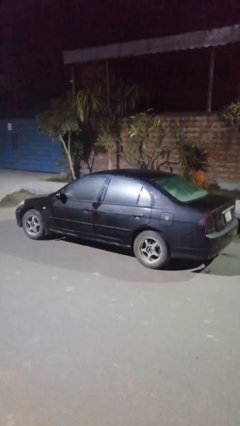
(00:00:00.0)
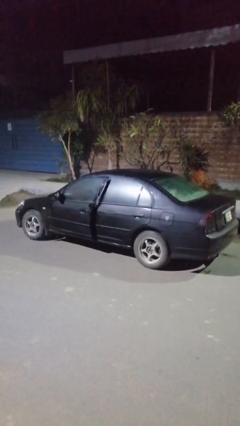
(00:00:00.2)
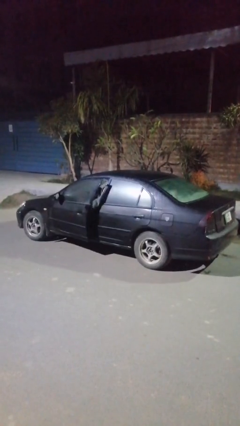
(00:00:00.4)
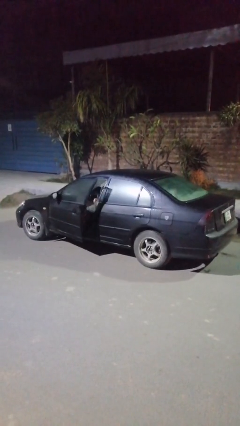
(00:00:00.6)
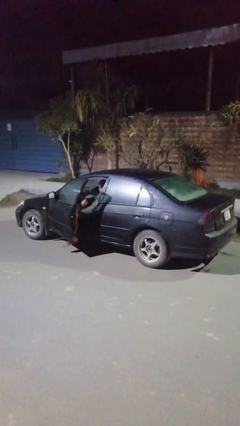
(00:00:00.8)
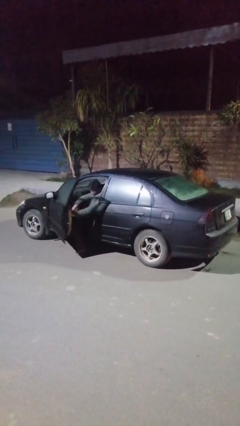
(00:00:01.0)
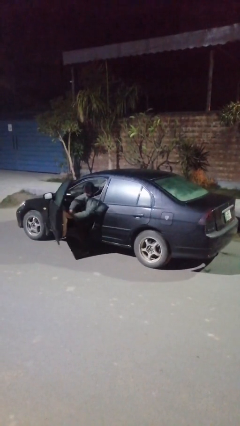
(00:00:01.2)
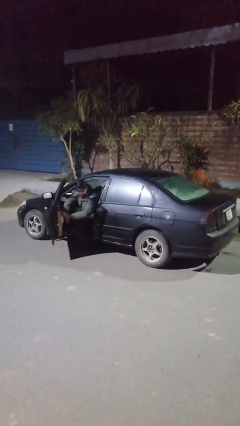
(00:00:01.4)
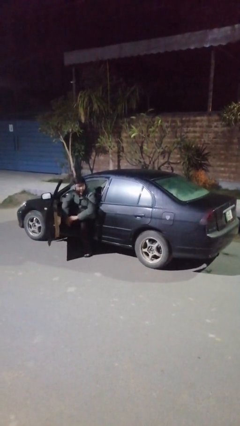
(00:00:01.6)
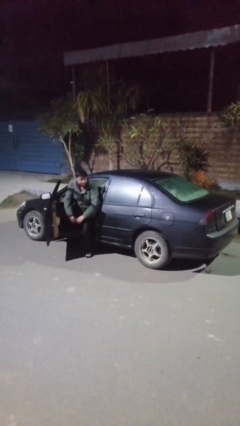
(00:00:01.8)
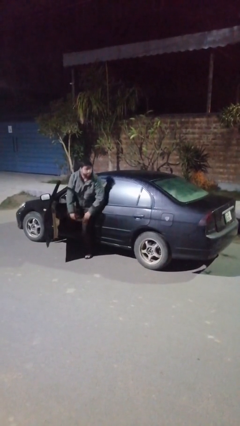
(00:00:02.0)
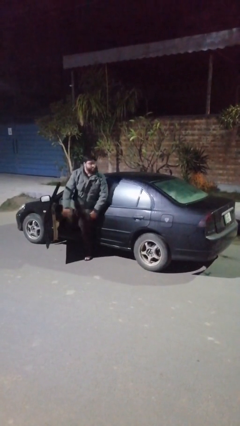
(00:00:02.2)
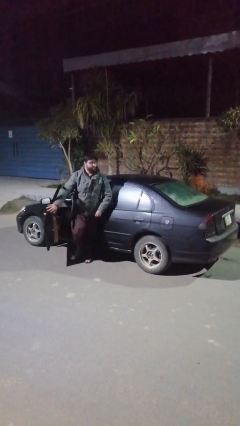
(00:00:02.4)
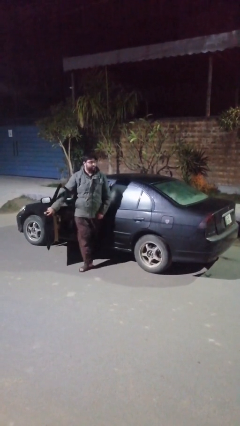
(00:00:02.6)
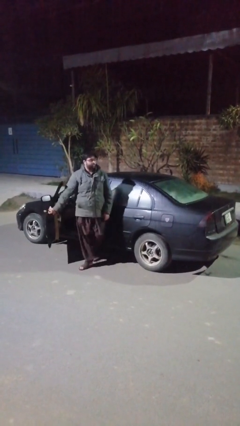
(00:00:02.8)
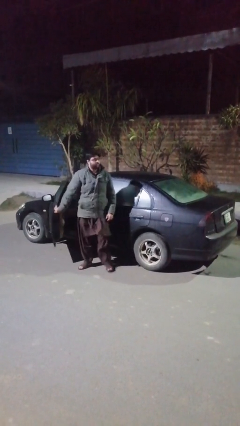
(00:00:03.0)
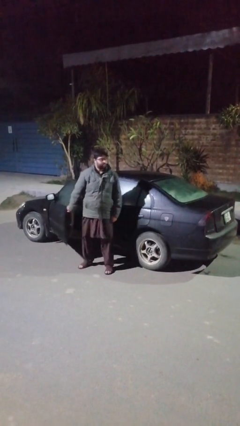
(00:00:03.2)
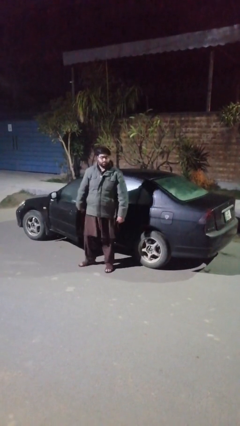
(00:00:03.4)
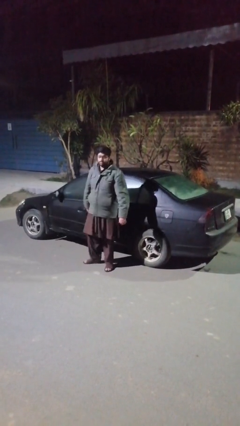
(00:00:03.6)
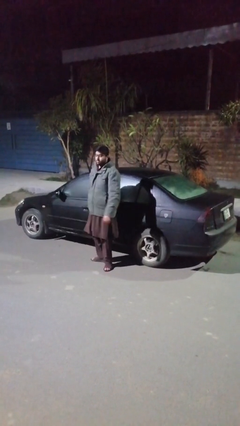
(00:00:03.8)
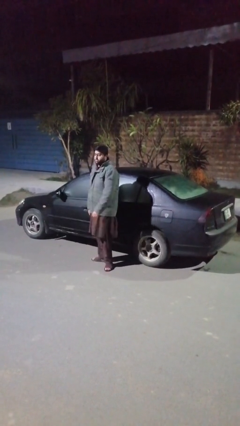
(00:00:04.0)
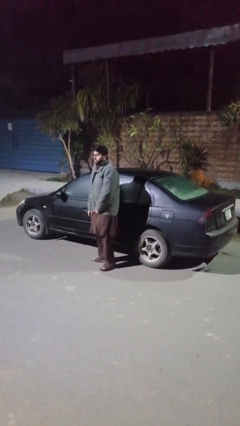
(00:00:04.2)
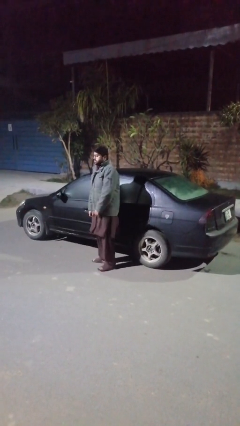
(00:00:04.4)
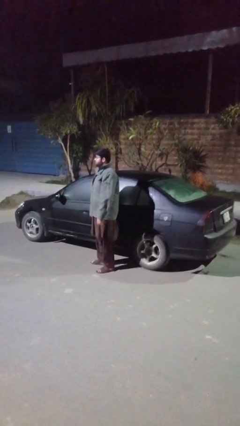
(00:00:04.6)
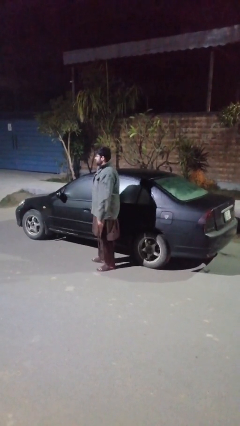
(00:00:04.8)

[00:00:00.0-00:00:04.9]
car drops off person

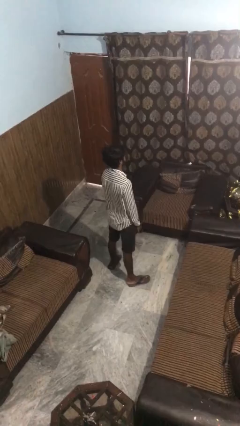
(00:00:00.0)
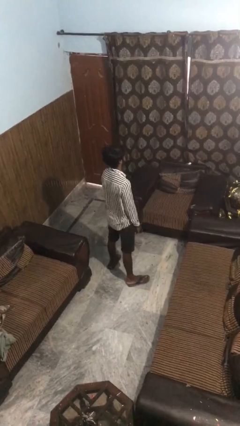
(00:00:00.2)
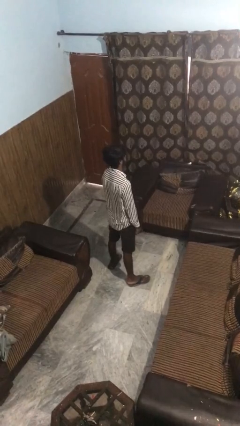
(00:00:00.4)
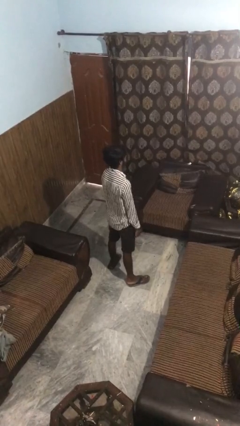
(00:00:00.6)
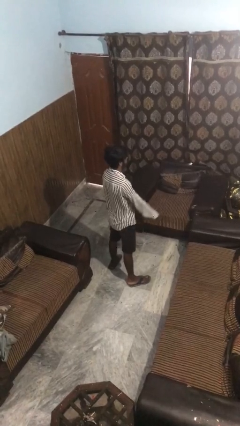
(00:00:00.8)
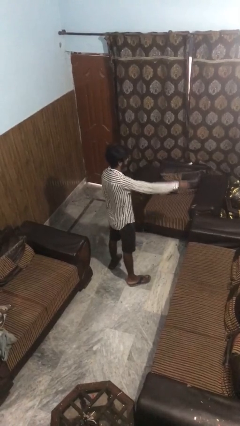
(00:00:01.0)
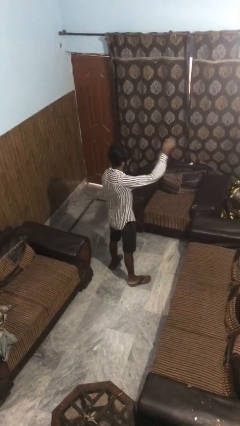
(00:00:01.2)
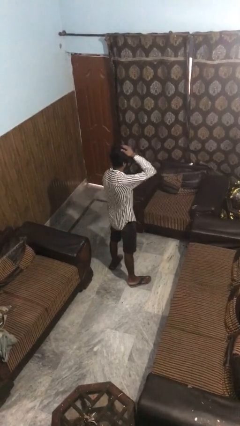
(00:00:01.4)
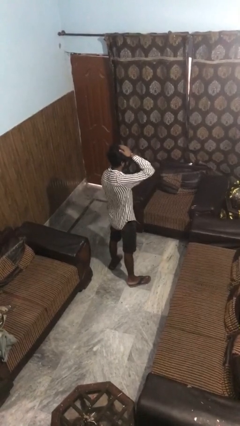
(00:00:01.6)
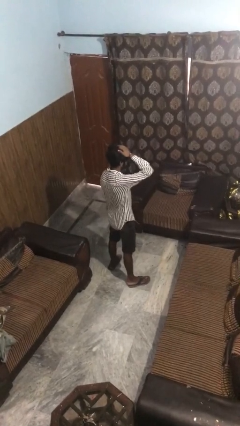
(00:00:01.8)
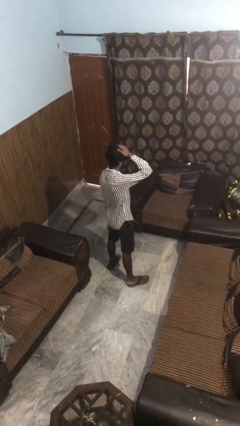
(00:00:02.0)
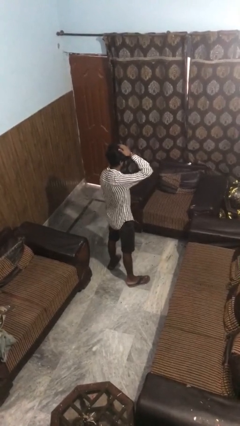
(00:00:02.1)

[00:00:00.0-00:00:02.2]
person pats head

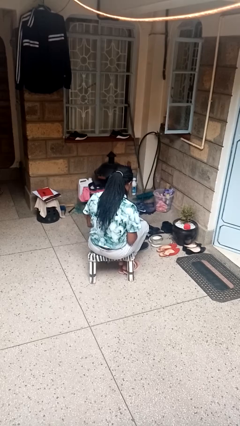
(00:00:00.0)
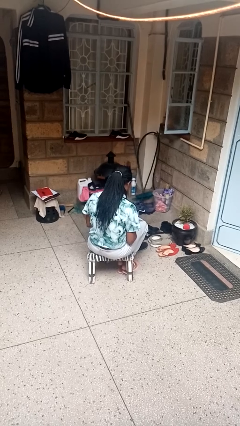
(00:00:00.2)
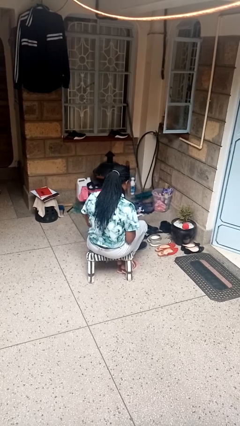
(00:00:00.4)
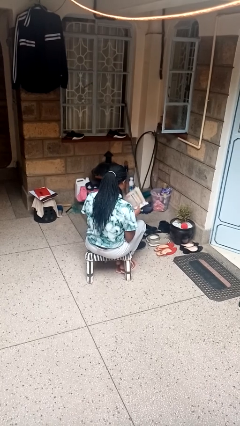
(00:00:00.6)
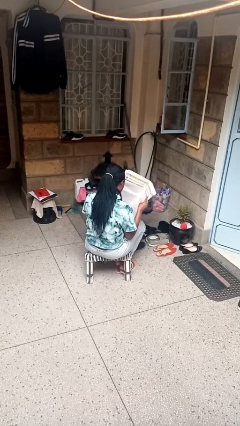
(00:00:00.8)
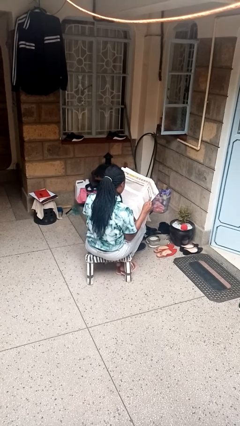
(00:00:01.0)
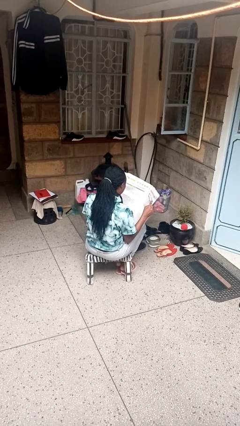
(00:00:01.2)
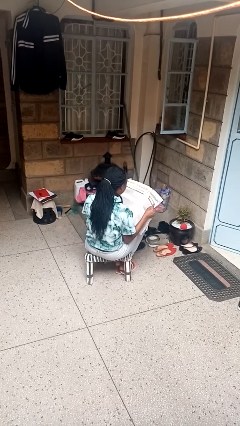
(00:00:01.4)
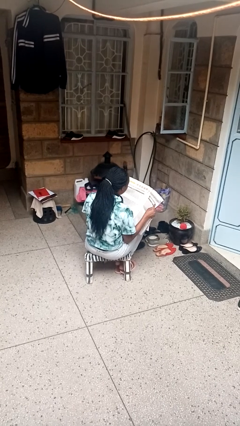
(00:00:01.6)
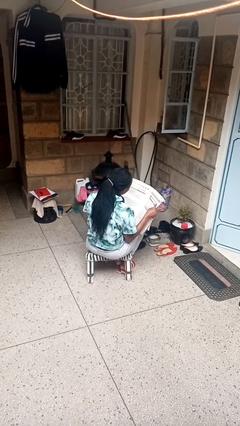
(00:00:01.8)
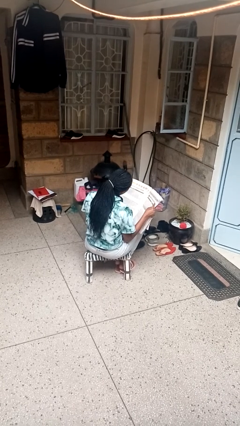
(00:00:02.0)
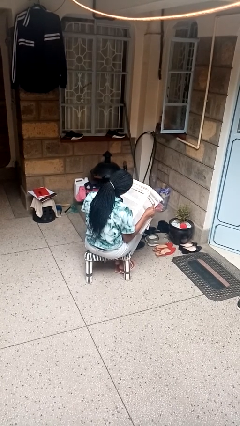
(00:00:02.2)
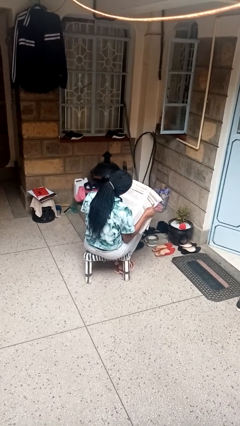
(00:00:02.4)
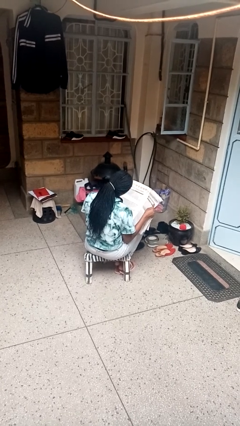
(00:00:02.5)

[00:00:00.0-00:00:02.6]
person reads newspaper

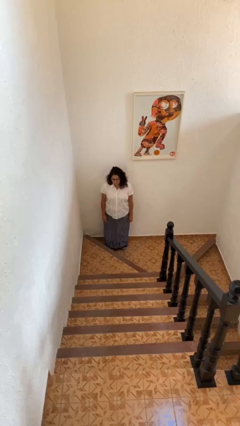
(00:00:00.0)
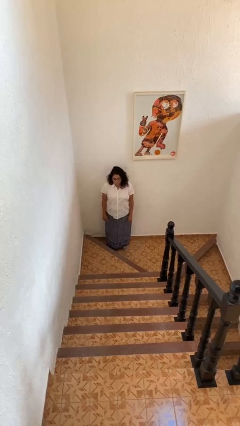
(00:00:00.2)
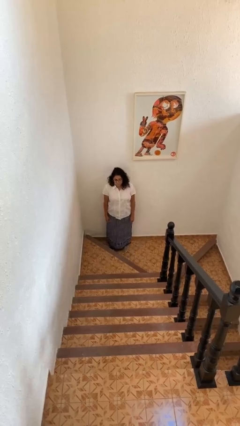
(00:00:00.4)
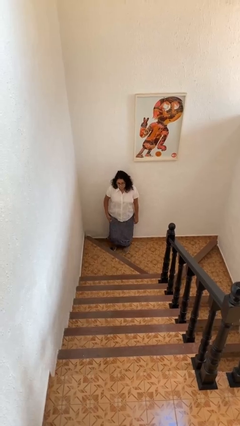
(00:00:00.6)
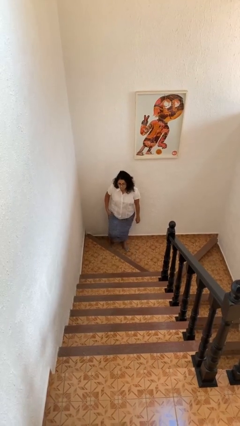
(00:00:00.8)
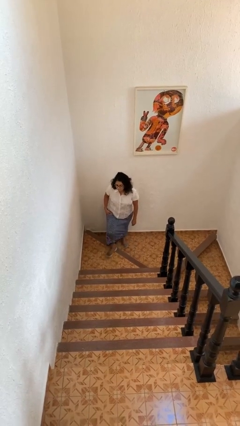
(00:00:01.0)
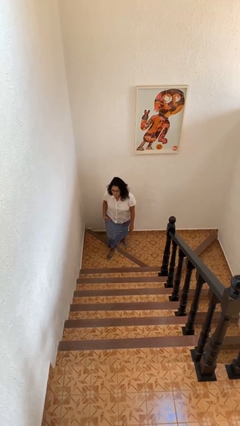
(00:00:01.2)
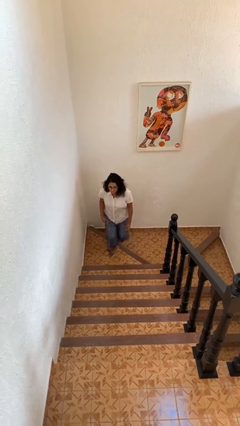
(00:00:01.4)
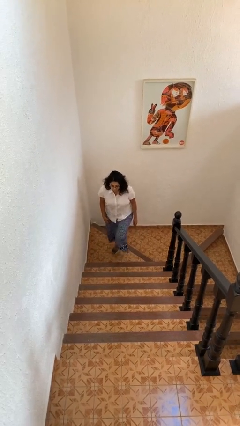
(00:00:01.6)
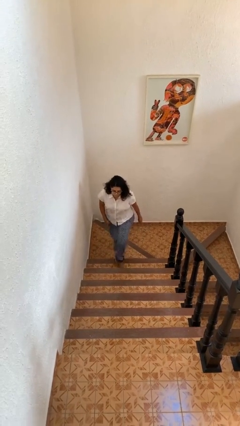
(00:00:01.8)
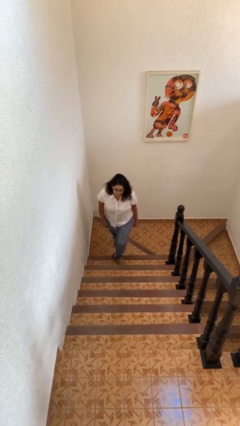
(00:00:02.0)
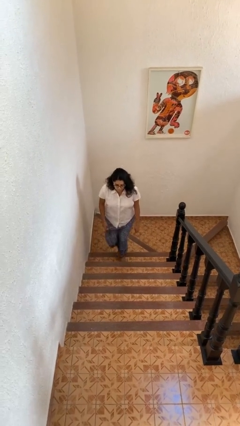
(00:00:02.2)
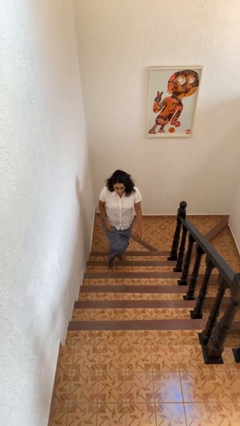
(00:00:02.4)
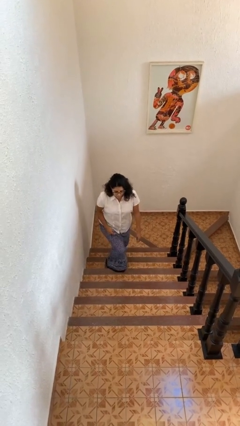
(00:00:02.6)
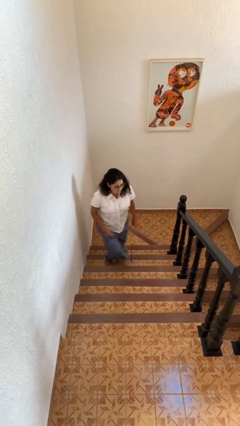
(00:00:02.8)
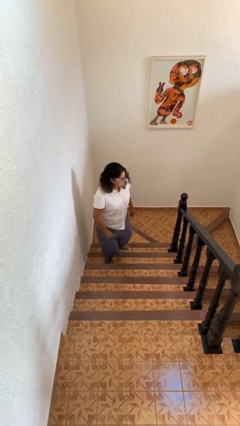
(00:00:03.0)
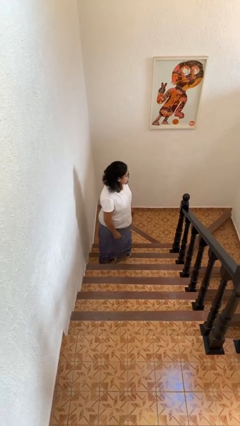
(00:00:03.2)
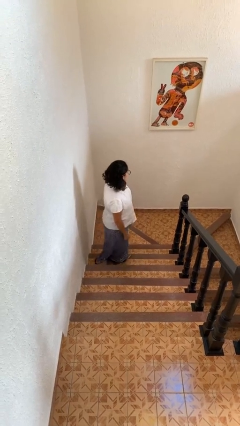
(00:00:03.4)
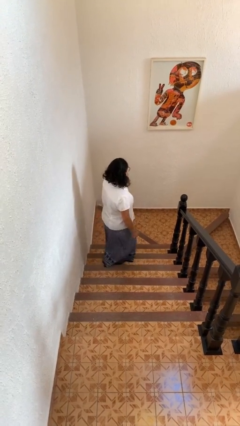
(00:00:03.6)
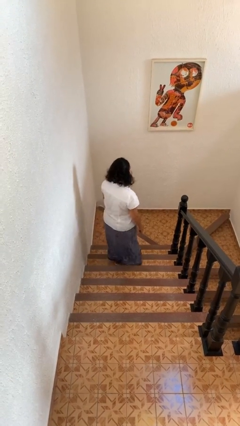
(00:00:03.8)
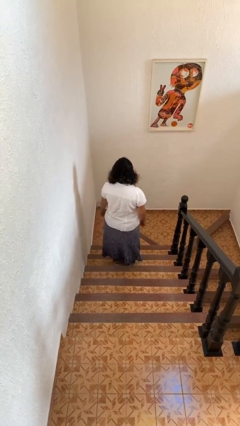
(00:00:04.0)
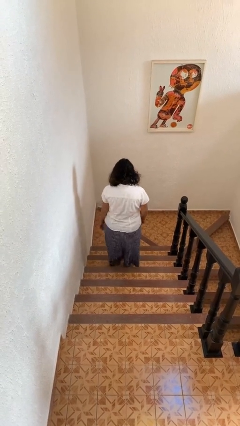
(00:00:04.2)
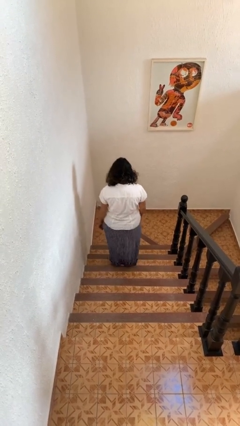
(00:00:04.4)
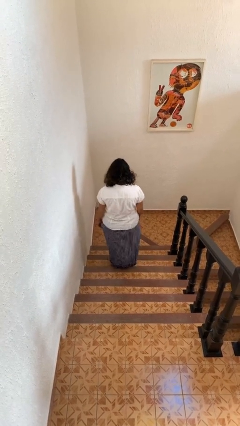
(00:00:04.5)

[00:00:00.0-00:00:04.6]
person climbs up stairs

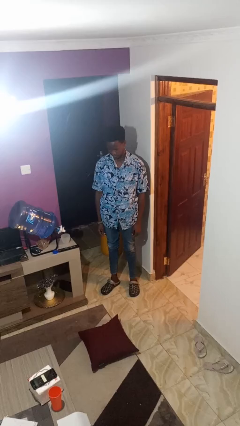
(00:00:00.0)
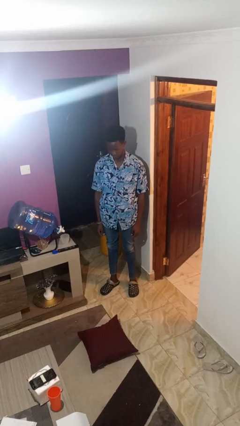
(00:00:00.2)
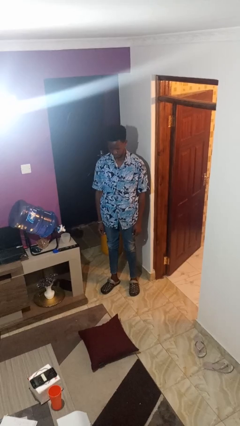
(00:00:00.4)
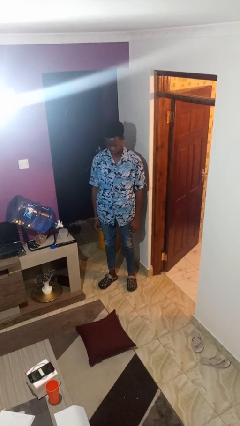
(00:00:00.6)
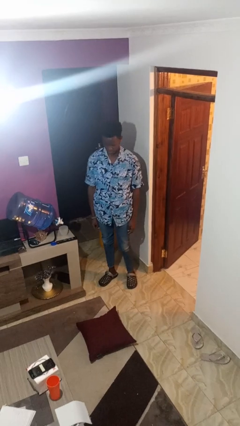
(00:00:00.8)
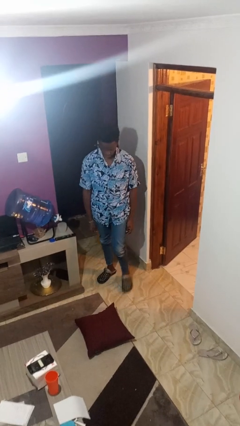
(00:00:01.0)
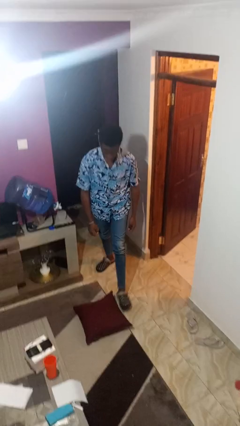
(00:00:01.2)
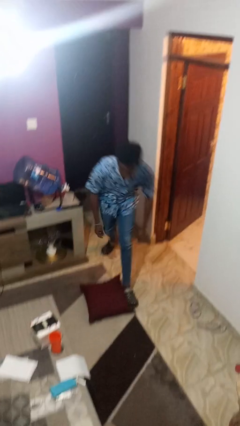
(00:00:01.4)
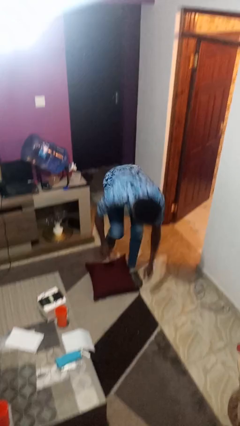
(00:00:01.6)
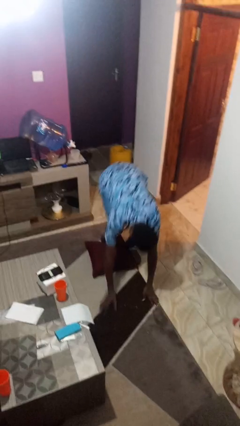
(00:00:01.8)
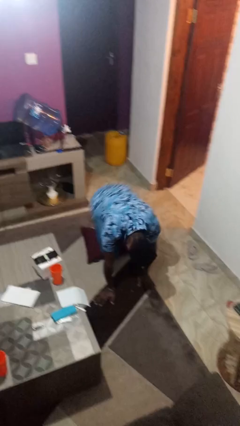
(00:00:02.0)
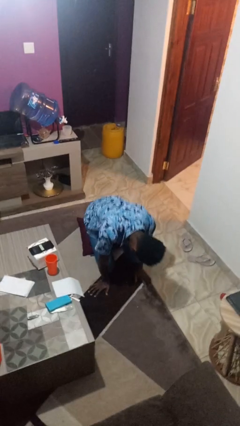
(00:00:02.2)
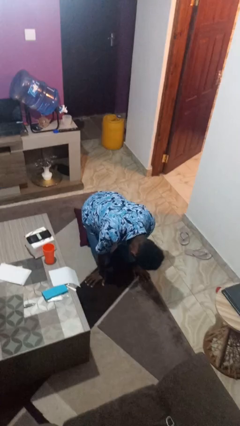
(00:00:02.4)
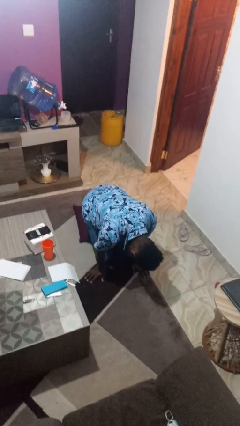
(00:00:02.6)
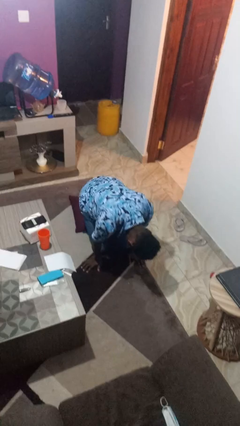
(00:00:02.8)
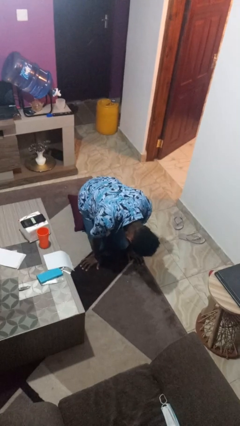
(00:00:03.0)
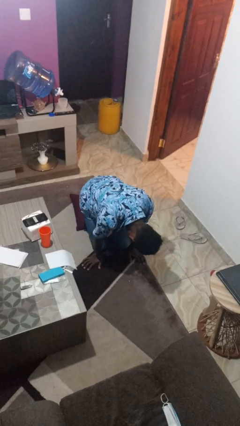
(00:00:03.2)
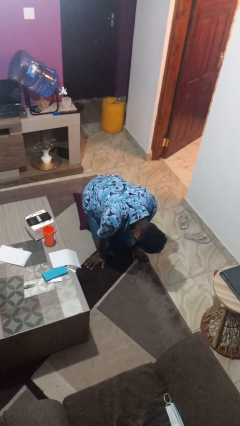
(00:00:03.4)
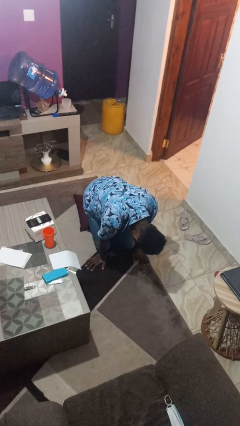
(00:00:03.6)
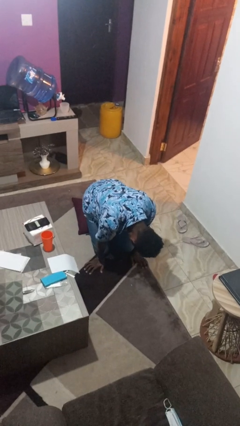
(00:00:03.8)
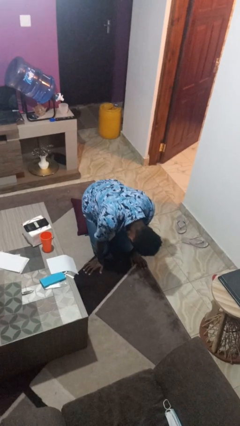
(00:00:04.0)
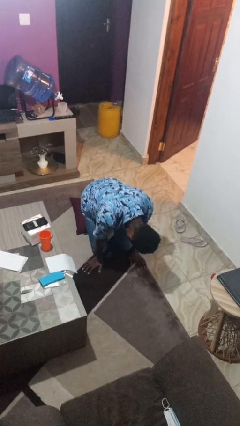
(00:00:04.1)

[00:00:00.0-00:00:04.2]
person trips on object on floor
